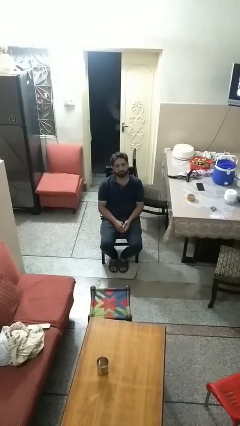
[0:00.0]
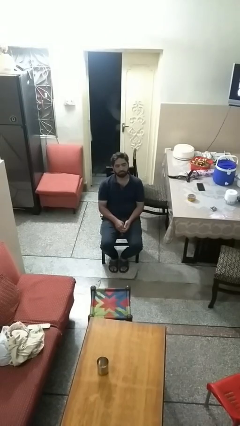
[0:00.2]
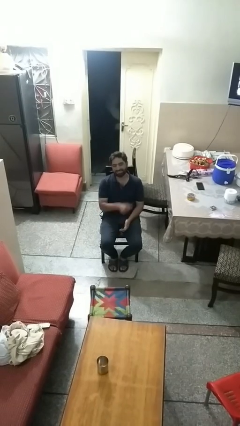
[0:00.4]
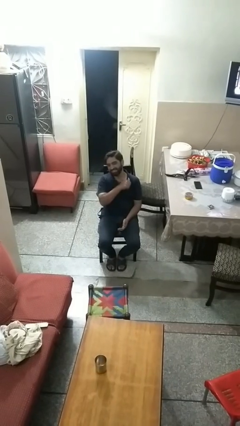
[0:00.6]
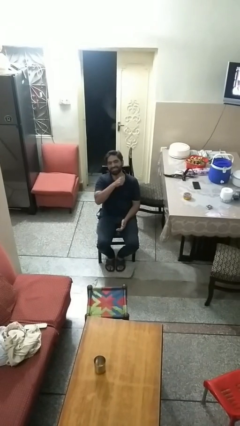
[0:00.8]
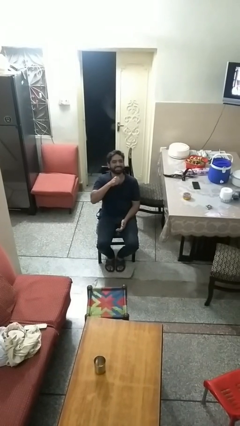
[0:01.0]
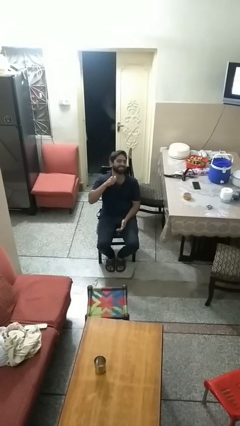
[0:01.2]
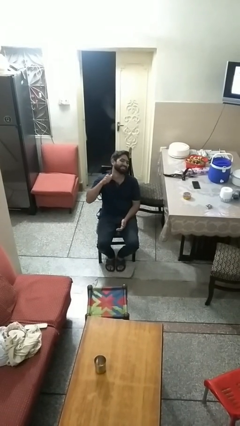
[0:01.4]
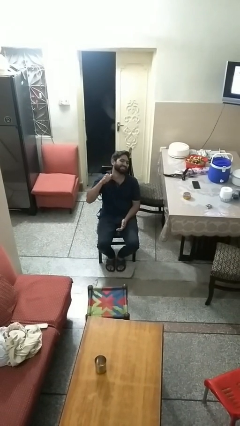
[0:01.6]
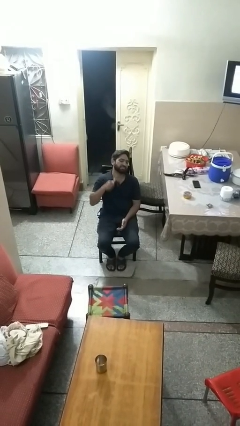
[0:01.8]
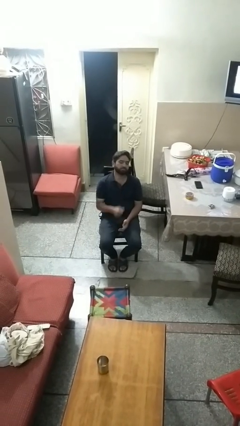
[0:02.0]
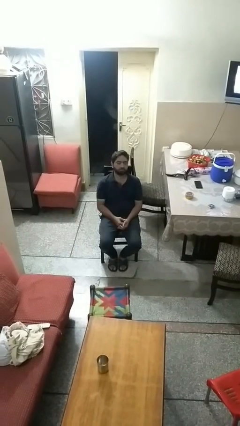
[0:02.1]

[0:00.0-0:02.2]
person gestures cut

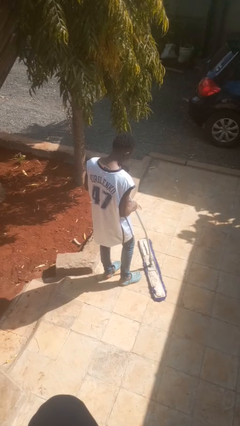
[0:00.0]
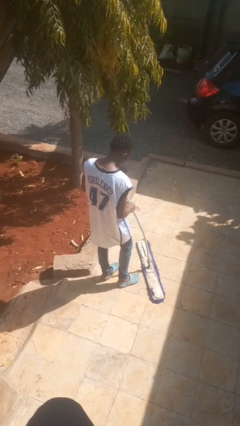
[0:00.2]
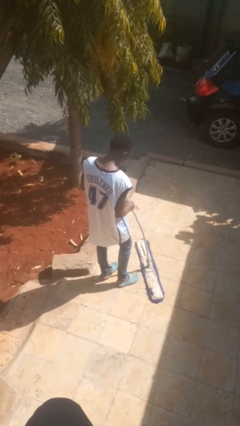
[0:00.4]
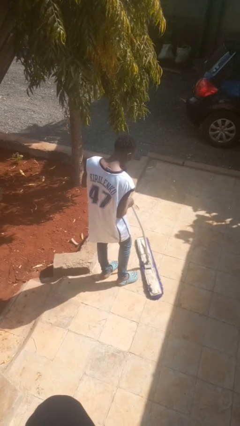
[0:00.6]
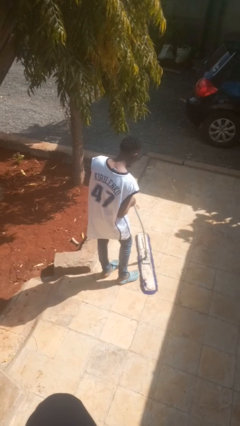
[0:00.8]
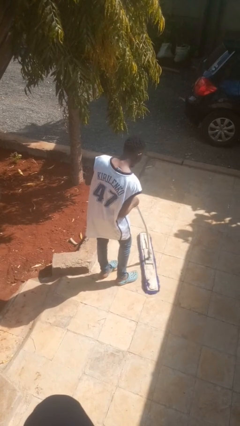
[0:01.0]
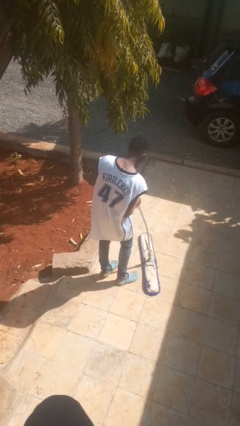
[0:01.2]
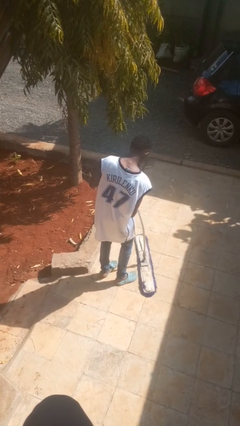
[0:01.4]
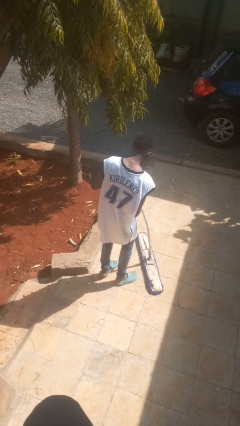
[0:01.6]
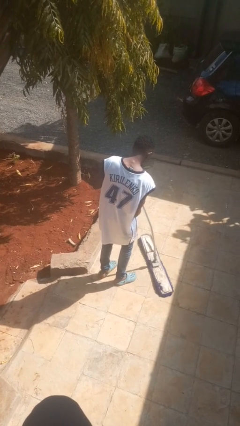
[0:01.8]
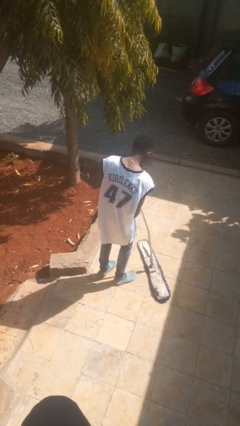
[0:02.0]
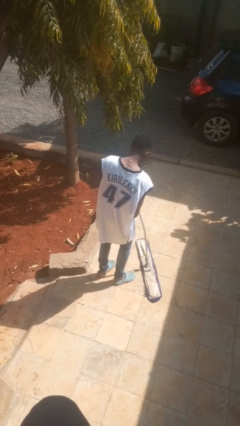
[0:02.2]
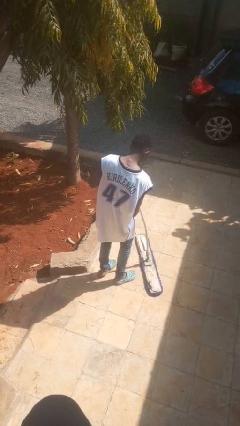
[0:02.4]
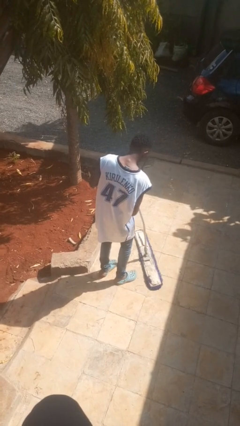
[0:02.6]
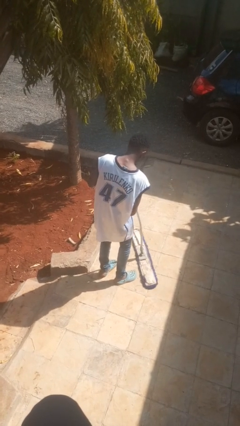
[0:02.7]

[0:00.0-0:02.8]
person mops

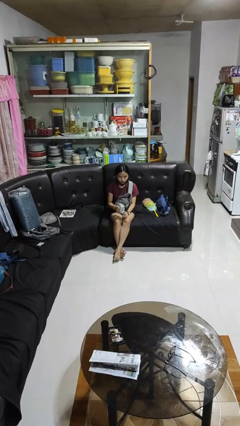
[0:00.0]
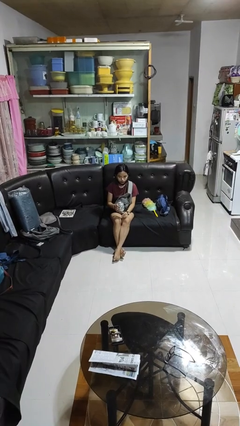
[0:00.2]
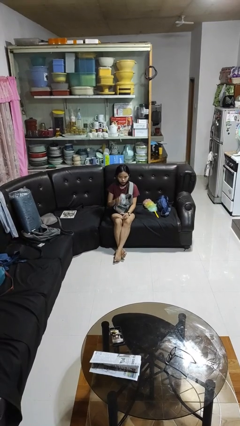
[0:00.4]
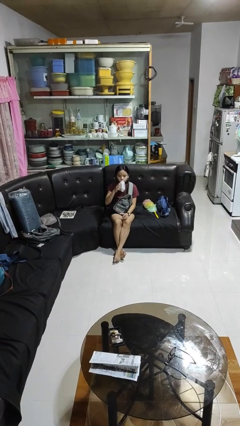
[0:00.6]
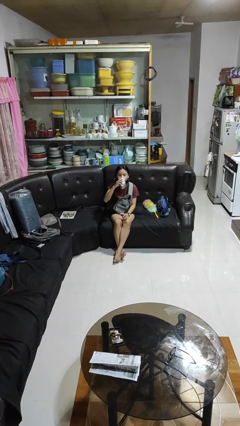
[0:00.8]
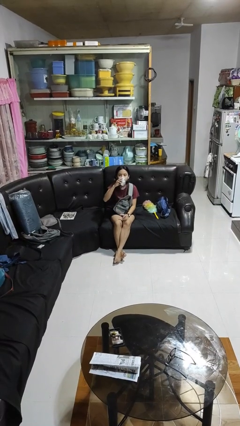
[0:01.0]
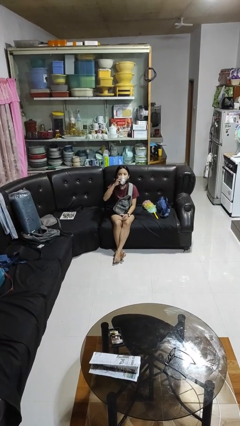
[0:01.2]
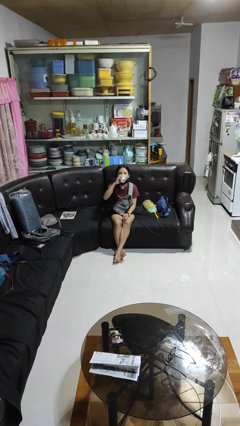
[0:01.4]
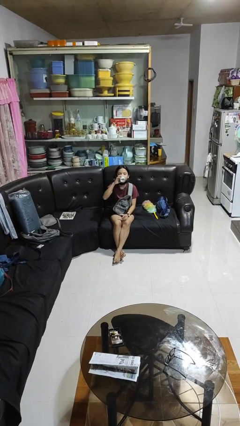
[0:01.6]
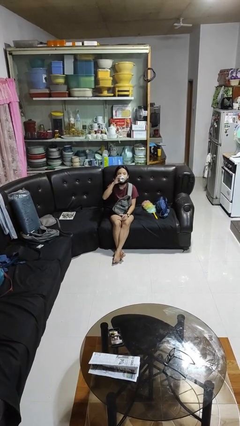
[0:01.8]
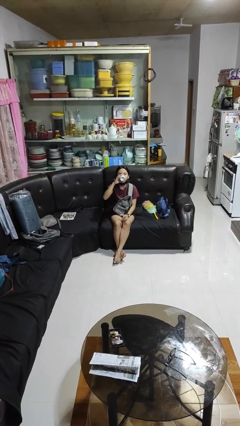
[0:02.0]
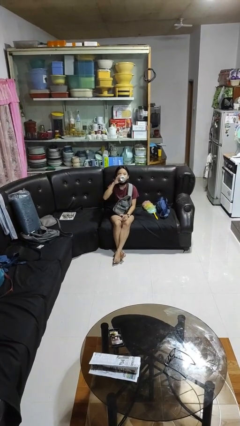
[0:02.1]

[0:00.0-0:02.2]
person drinks from beverage can

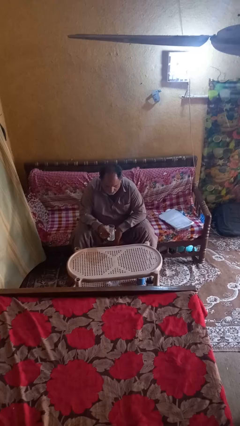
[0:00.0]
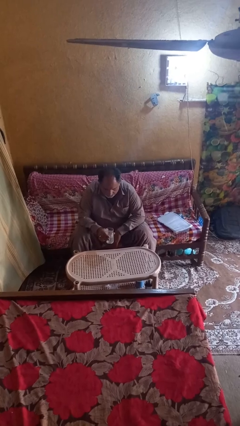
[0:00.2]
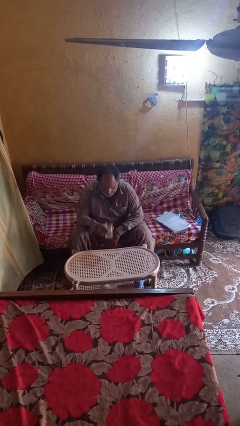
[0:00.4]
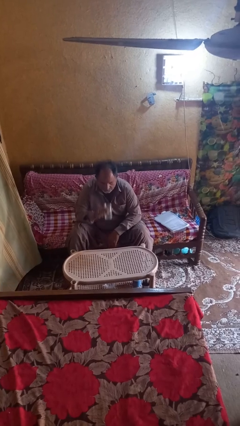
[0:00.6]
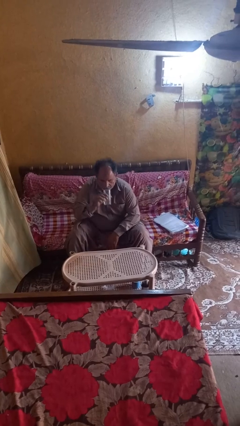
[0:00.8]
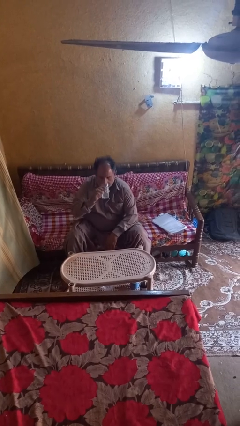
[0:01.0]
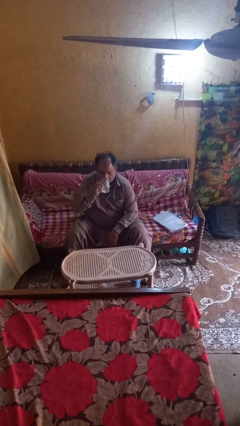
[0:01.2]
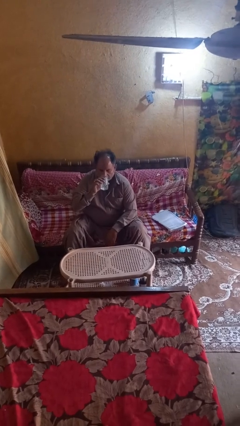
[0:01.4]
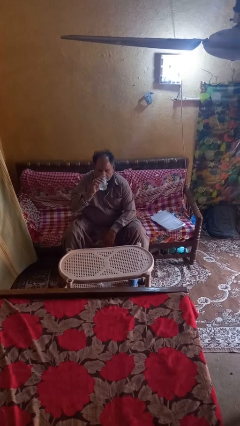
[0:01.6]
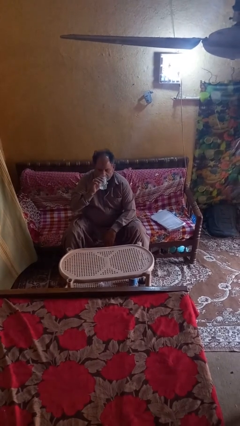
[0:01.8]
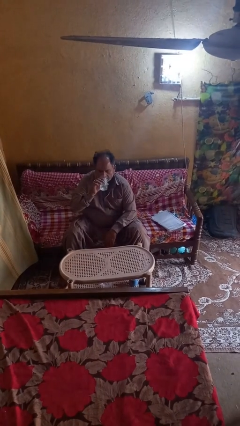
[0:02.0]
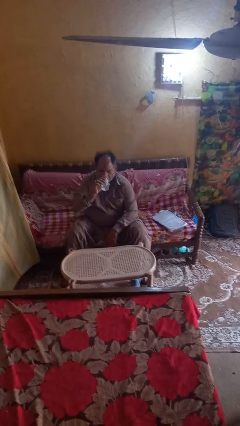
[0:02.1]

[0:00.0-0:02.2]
person drinks from shotglass

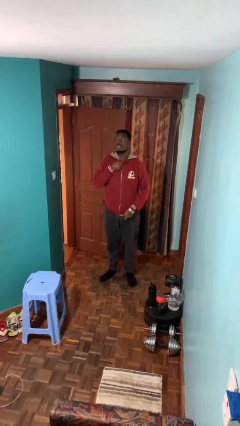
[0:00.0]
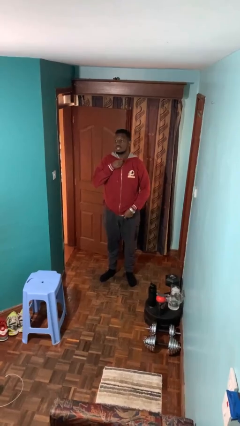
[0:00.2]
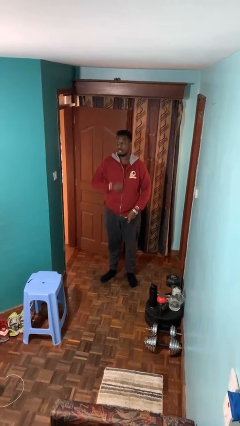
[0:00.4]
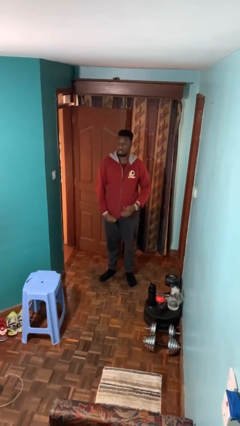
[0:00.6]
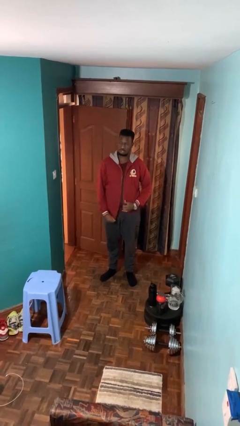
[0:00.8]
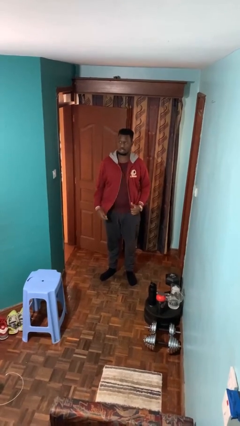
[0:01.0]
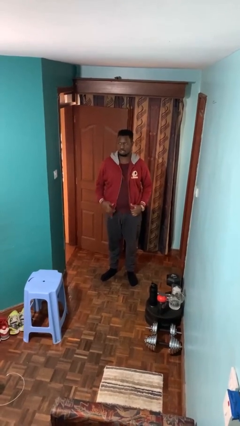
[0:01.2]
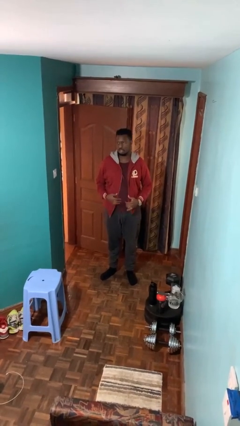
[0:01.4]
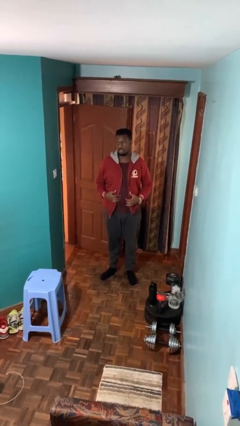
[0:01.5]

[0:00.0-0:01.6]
person unzips jacket

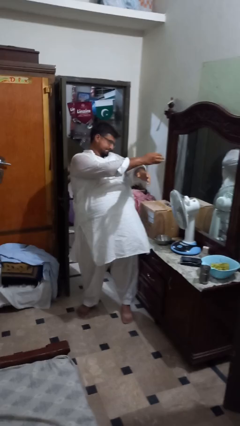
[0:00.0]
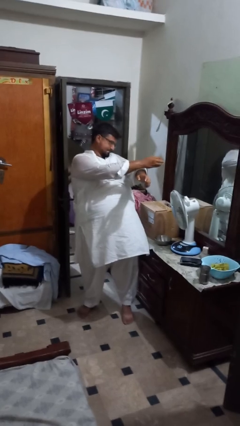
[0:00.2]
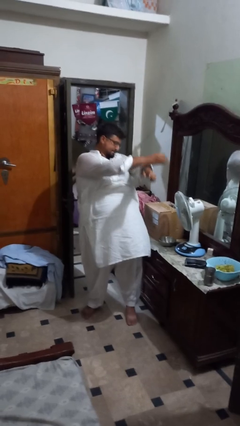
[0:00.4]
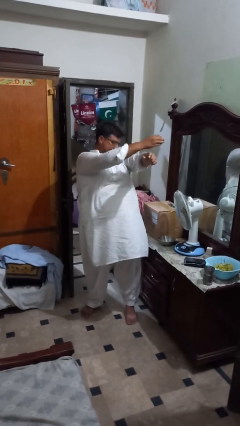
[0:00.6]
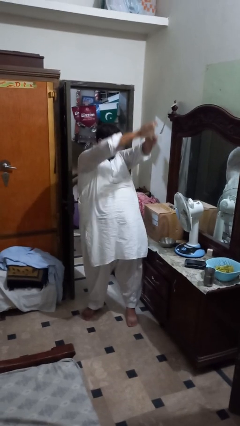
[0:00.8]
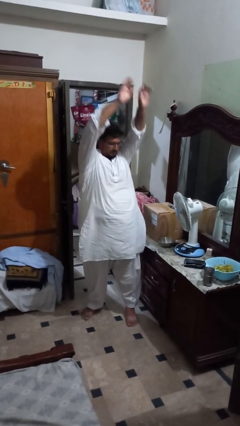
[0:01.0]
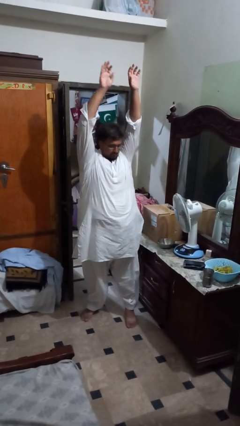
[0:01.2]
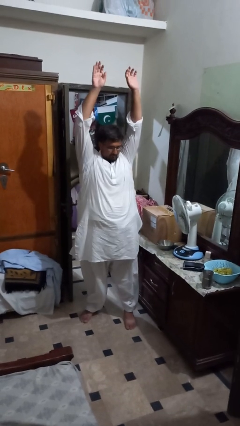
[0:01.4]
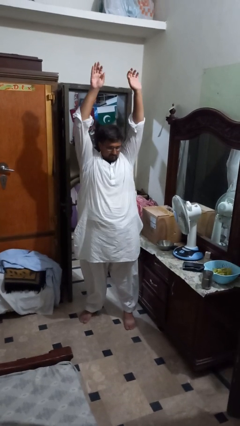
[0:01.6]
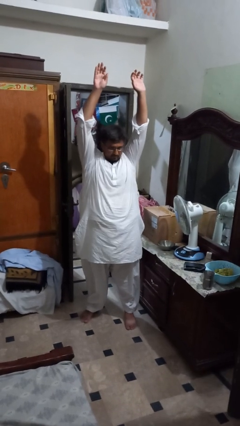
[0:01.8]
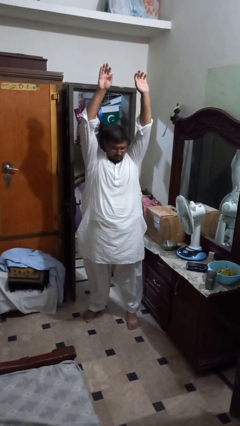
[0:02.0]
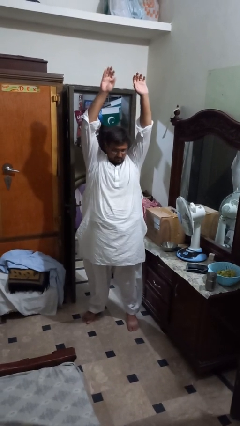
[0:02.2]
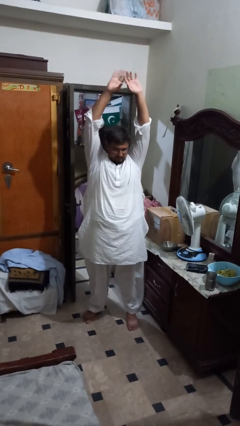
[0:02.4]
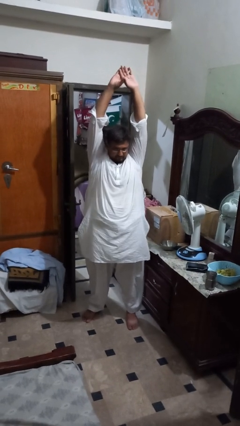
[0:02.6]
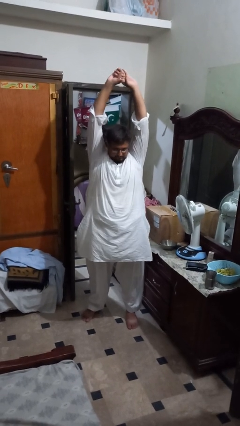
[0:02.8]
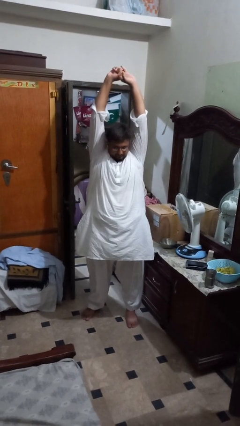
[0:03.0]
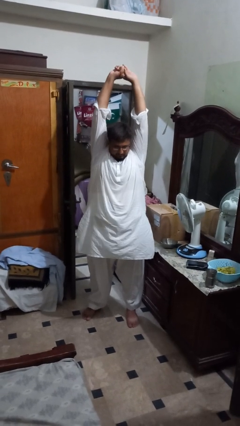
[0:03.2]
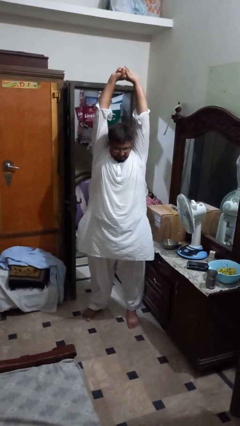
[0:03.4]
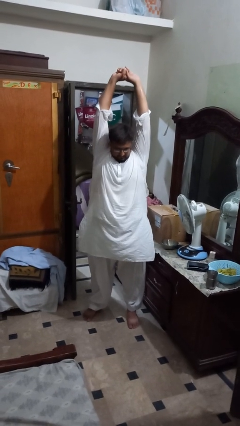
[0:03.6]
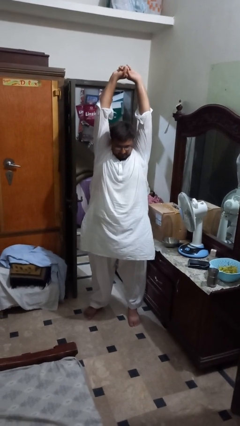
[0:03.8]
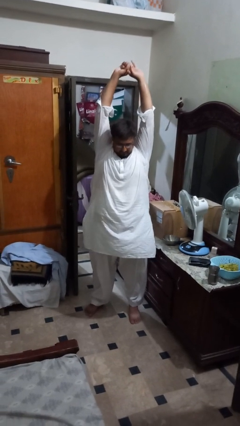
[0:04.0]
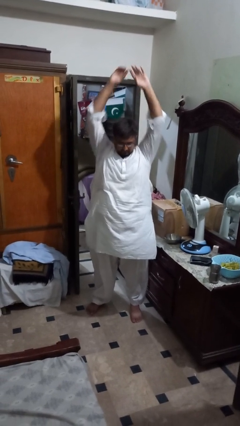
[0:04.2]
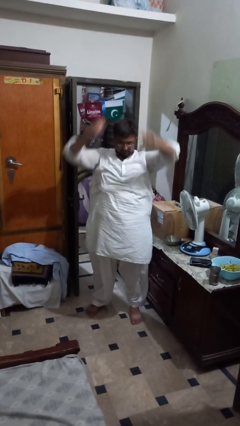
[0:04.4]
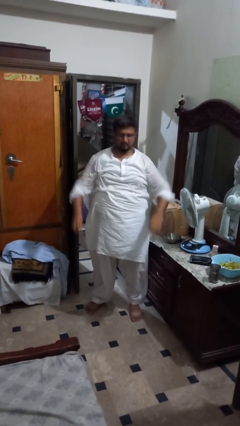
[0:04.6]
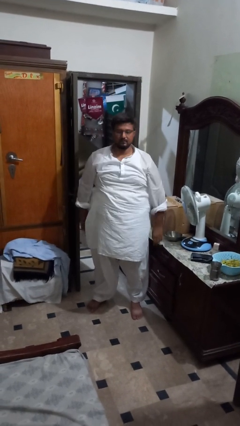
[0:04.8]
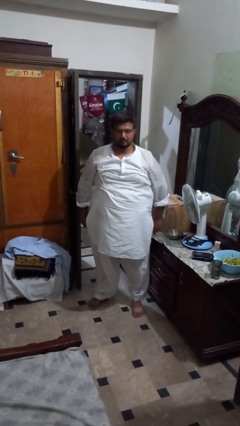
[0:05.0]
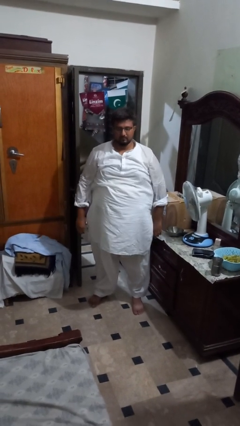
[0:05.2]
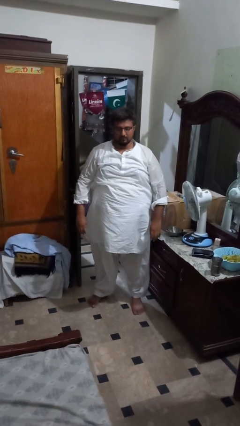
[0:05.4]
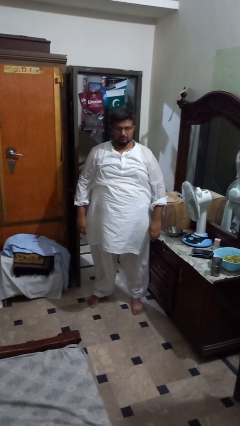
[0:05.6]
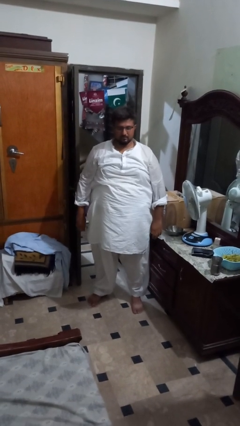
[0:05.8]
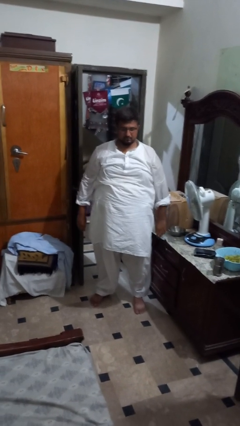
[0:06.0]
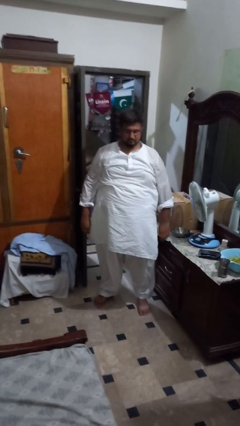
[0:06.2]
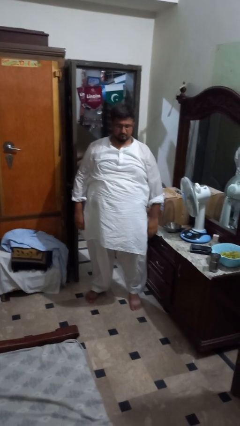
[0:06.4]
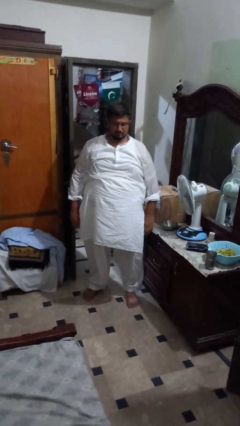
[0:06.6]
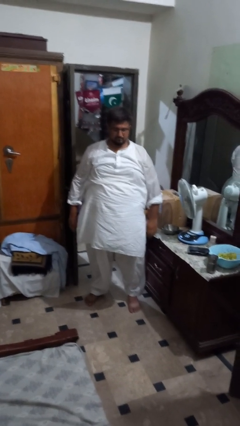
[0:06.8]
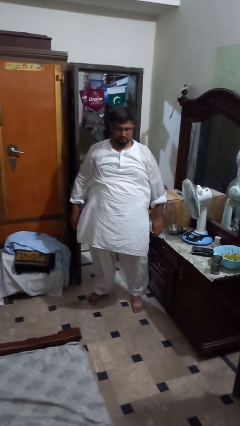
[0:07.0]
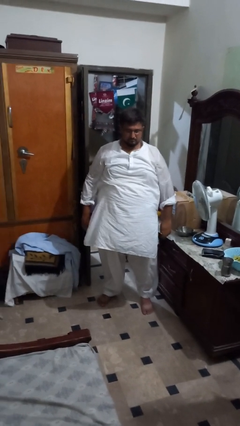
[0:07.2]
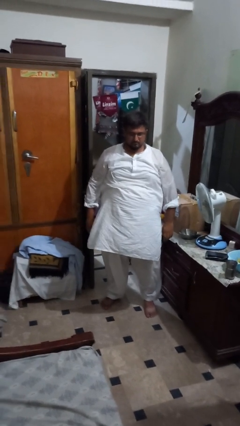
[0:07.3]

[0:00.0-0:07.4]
person stretches arms over head
